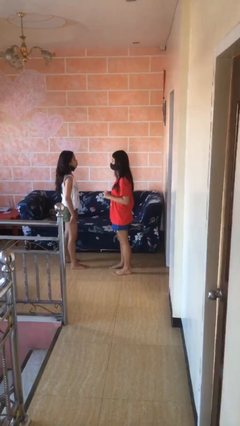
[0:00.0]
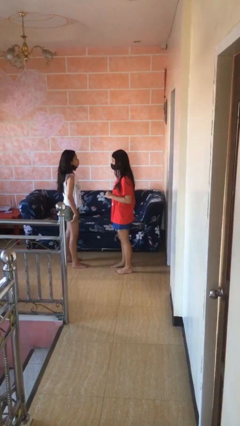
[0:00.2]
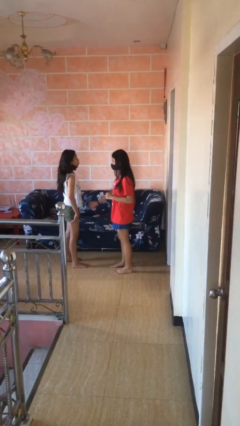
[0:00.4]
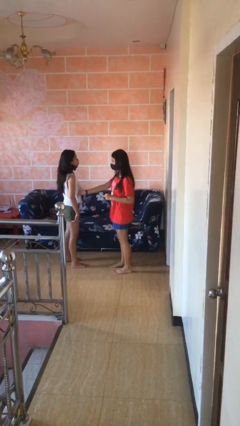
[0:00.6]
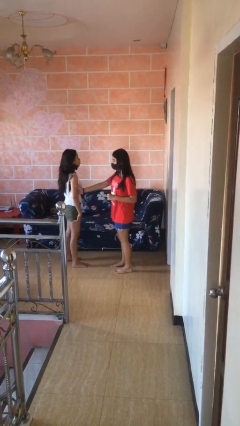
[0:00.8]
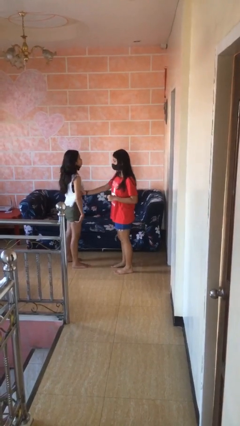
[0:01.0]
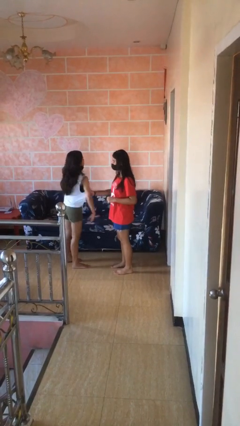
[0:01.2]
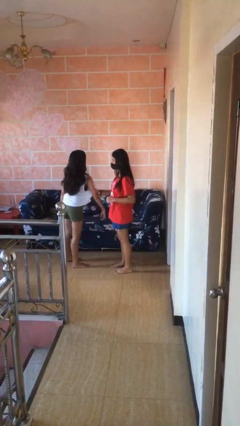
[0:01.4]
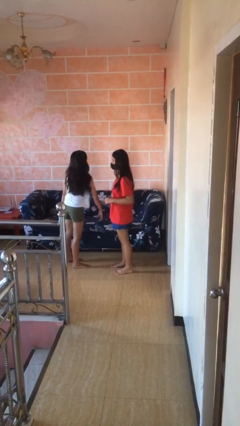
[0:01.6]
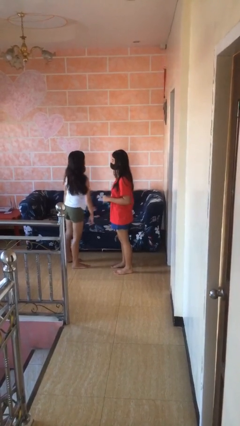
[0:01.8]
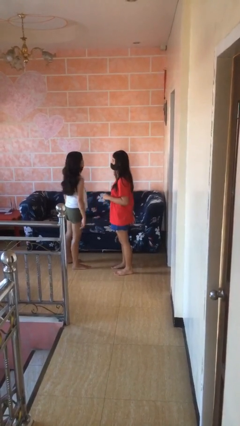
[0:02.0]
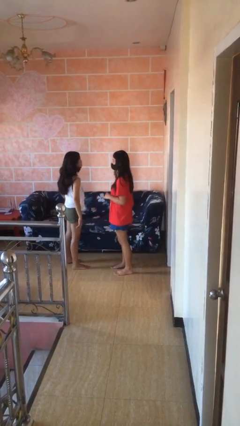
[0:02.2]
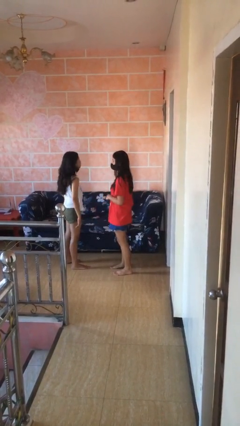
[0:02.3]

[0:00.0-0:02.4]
person grabs person by bicep

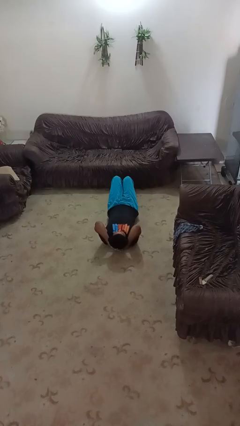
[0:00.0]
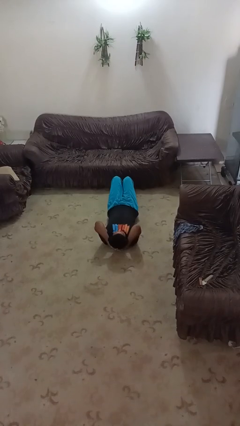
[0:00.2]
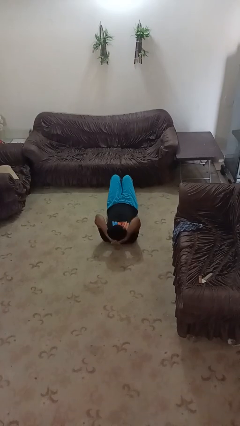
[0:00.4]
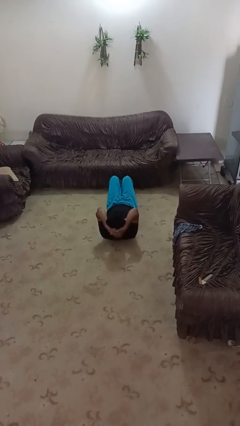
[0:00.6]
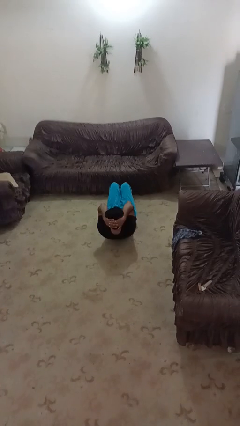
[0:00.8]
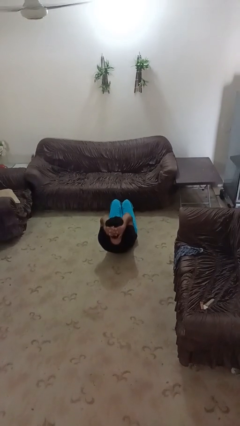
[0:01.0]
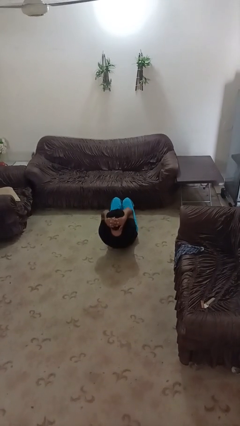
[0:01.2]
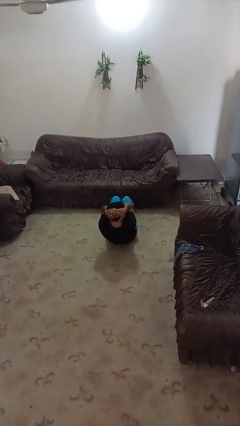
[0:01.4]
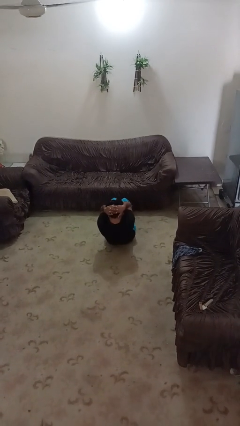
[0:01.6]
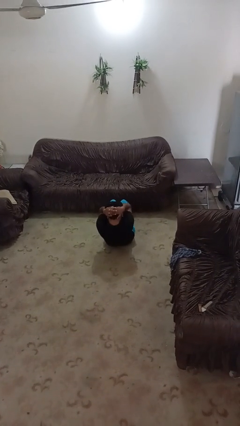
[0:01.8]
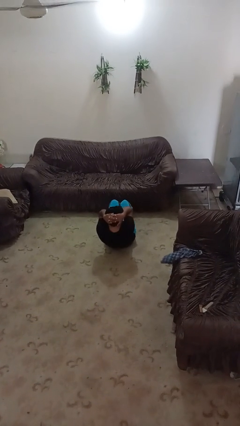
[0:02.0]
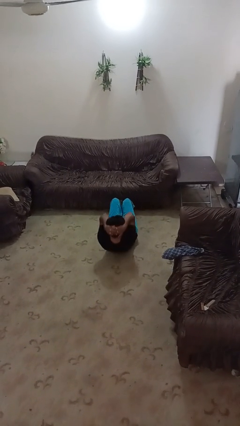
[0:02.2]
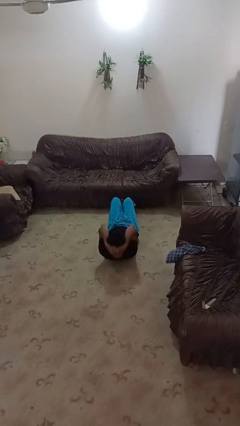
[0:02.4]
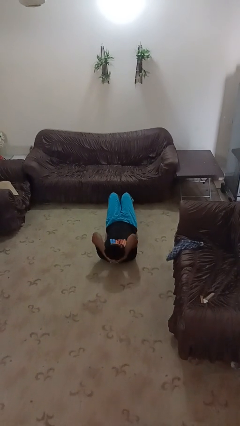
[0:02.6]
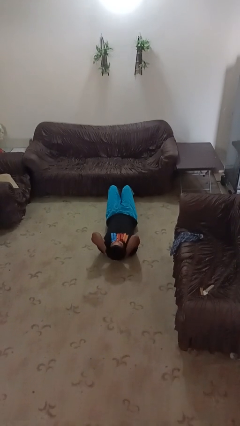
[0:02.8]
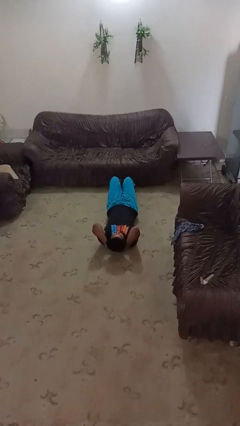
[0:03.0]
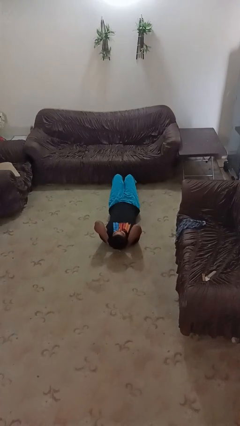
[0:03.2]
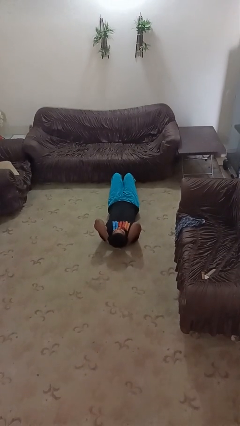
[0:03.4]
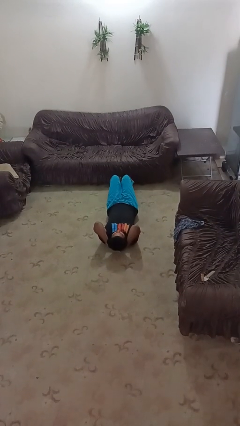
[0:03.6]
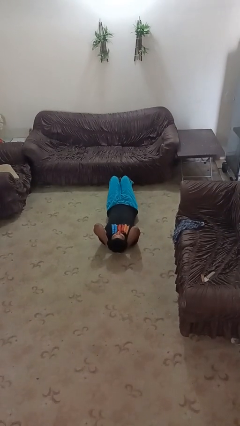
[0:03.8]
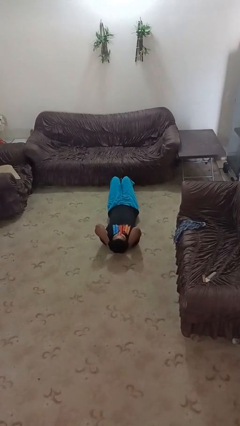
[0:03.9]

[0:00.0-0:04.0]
person exercises with situp

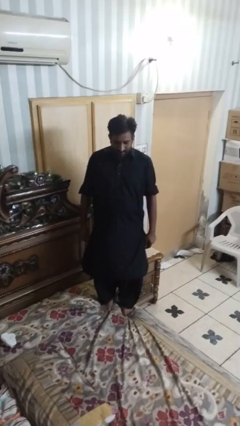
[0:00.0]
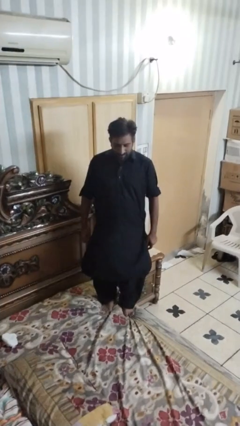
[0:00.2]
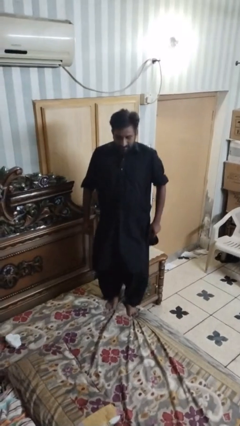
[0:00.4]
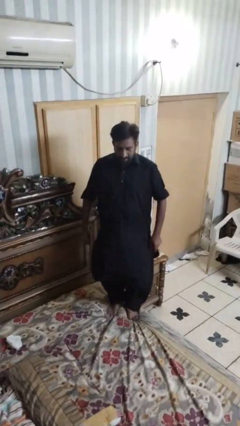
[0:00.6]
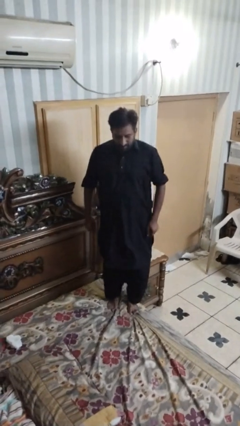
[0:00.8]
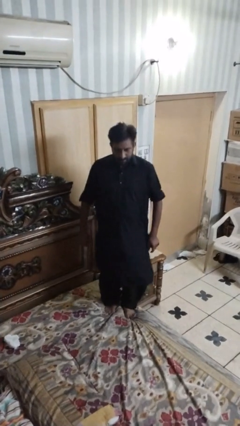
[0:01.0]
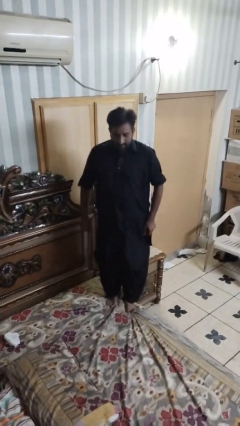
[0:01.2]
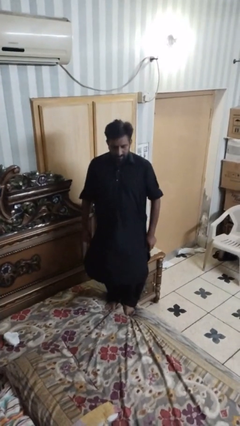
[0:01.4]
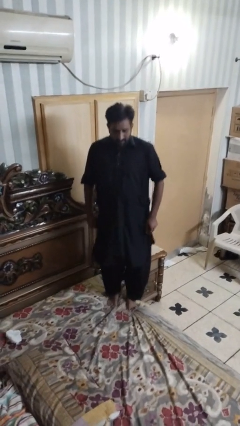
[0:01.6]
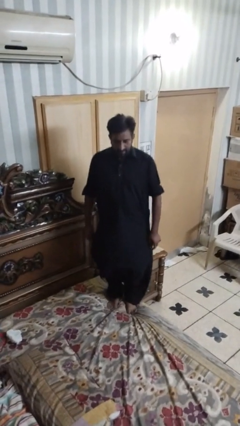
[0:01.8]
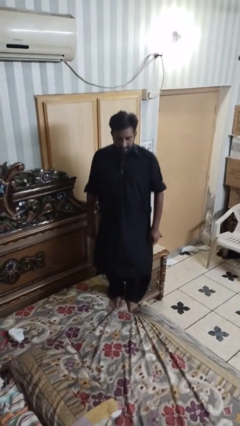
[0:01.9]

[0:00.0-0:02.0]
person jumps on bed

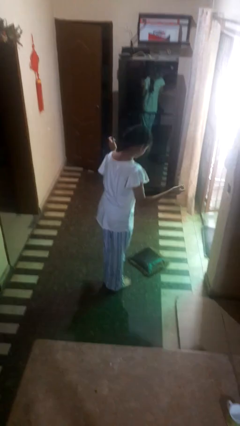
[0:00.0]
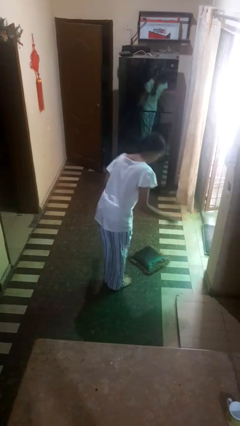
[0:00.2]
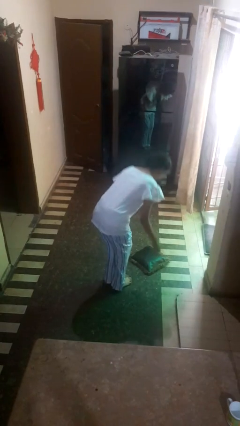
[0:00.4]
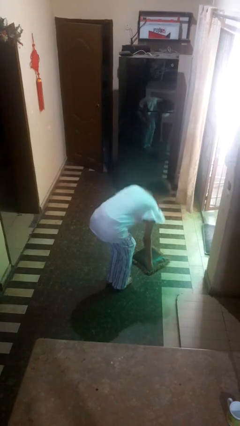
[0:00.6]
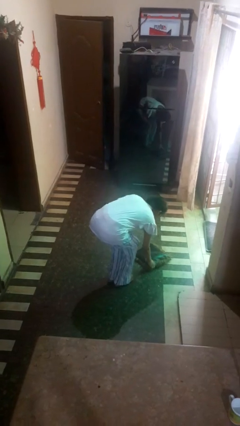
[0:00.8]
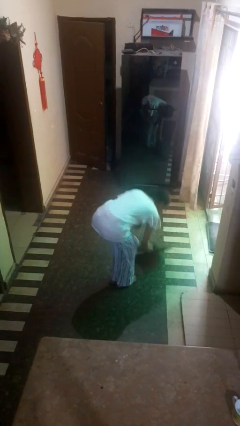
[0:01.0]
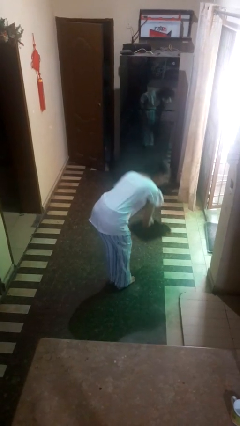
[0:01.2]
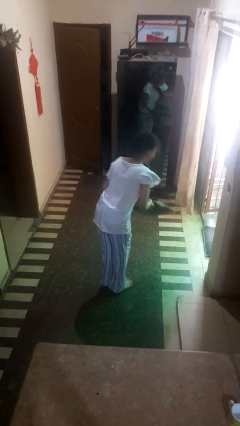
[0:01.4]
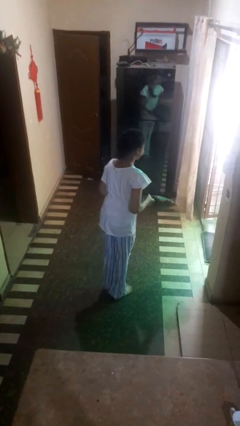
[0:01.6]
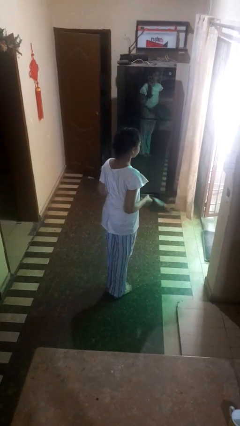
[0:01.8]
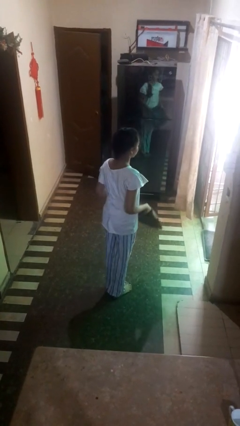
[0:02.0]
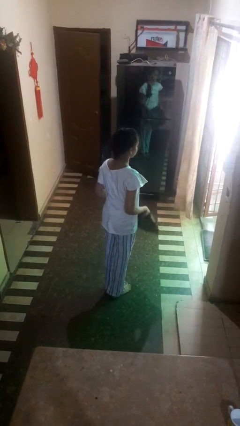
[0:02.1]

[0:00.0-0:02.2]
person picks up object from floor

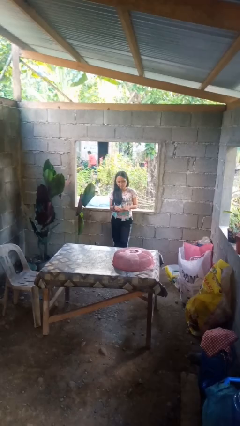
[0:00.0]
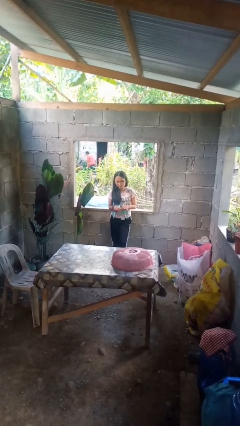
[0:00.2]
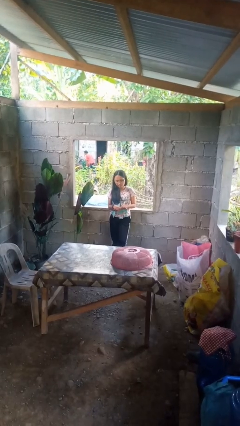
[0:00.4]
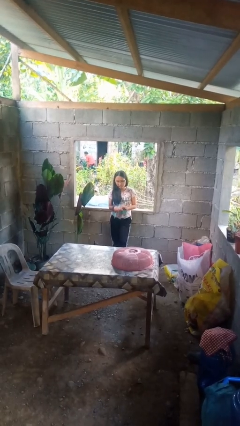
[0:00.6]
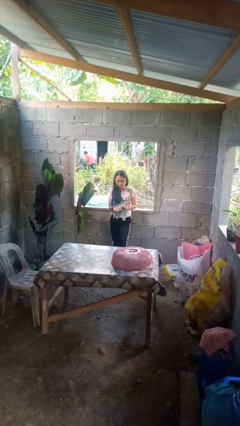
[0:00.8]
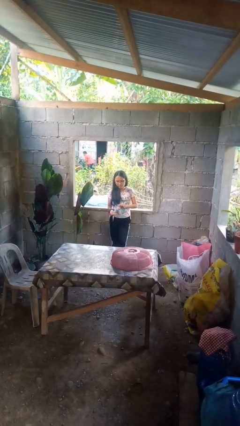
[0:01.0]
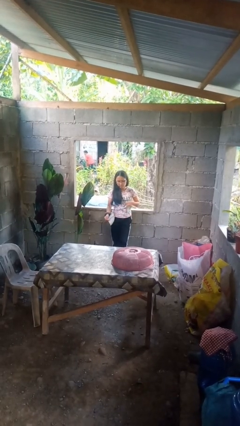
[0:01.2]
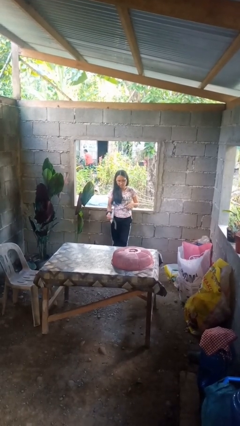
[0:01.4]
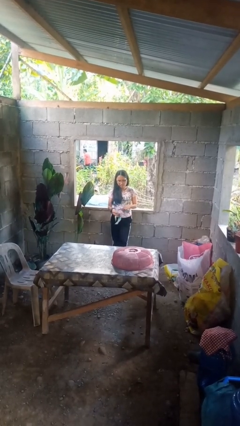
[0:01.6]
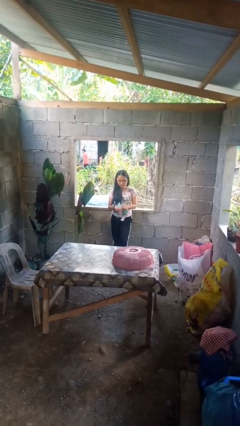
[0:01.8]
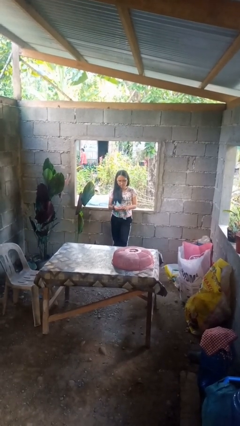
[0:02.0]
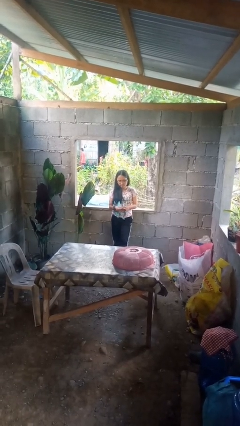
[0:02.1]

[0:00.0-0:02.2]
person tears paper

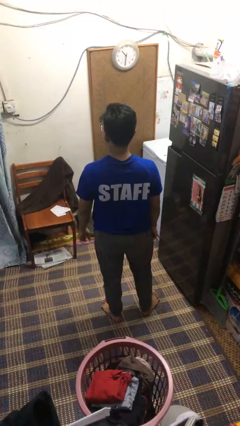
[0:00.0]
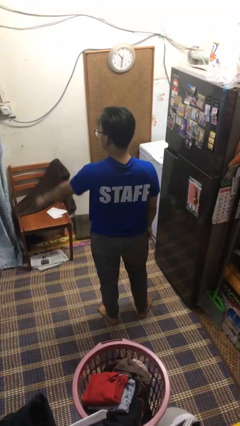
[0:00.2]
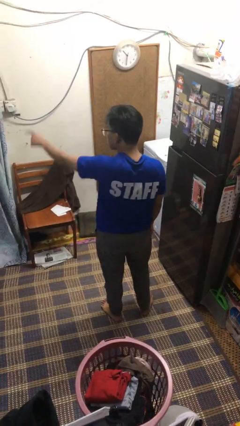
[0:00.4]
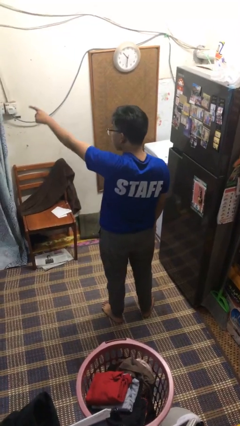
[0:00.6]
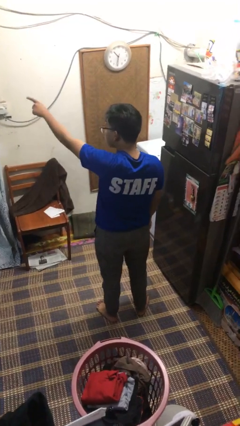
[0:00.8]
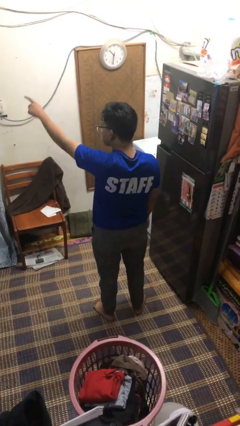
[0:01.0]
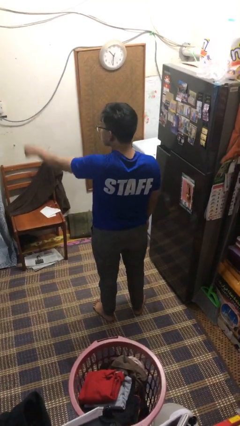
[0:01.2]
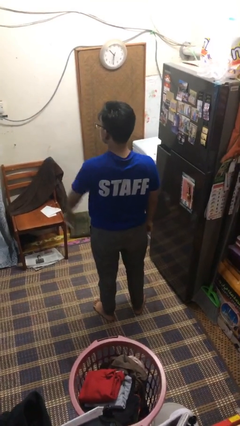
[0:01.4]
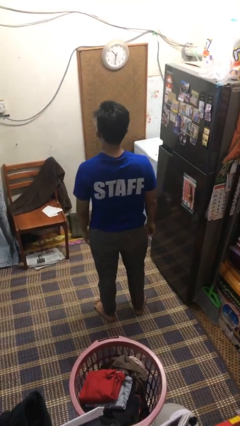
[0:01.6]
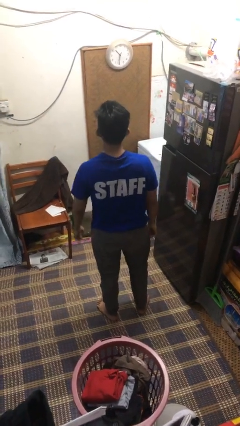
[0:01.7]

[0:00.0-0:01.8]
person points at person

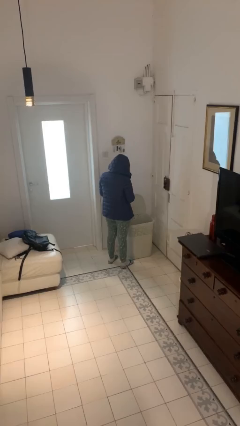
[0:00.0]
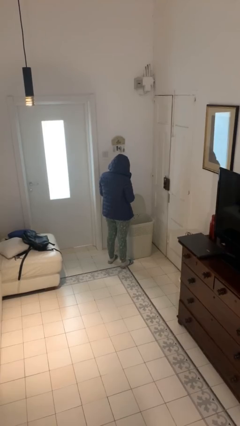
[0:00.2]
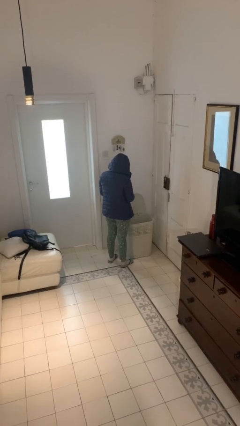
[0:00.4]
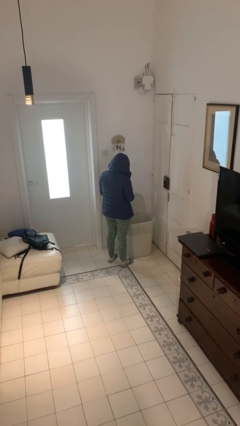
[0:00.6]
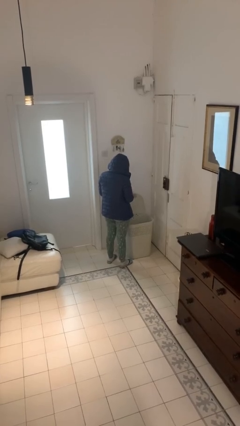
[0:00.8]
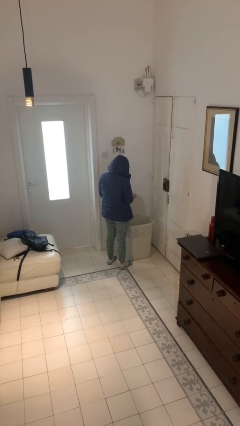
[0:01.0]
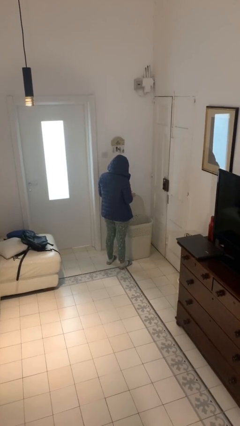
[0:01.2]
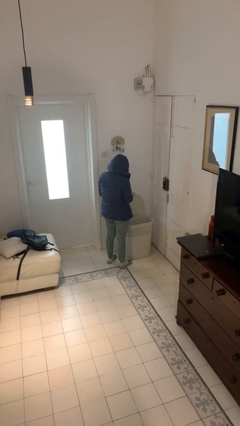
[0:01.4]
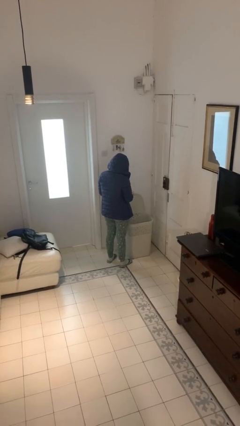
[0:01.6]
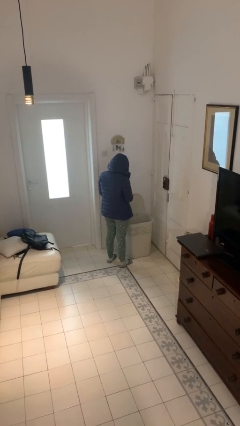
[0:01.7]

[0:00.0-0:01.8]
person discards trash

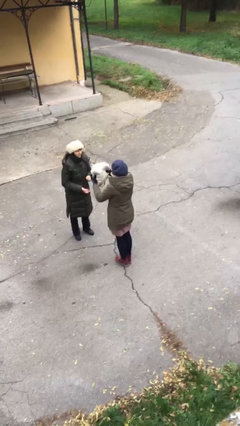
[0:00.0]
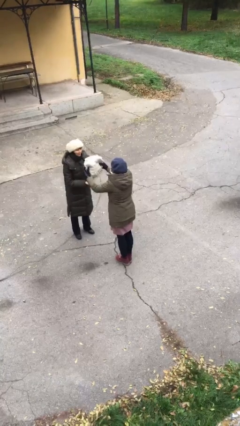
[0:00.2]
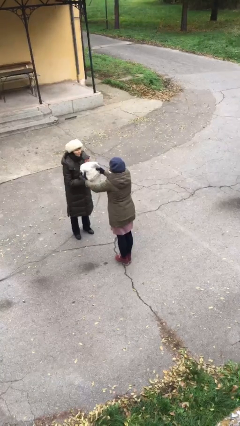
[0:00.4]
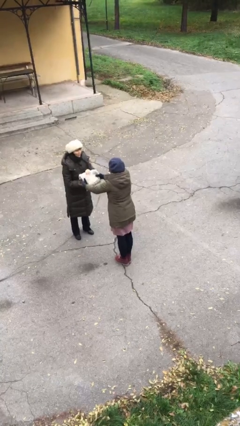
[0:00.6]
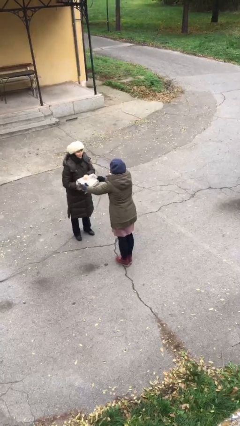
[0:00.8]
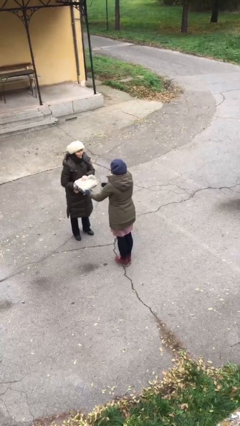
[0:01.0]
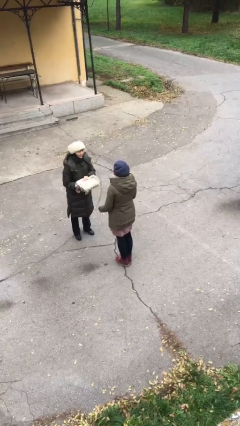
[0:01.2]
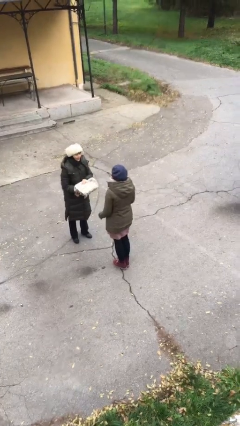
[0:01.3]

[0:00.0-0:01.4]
person transfers object to person
